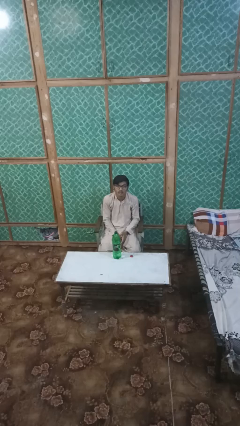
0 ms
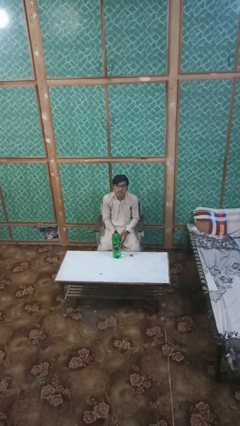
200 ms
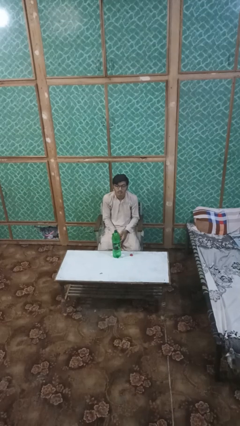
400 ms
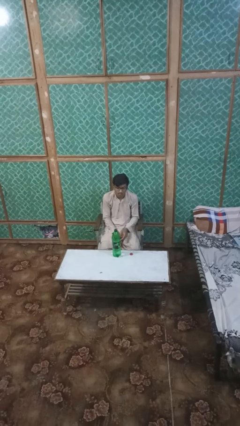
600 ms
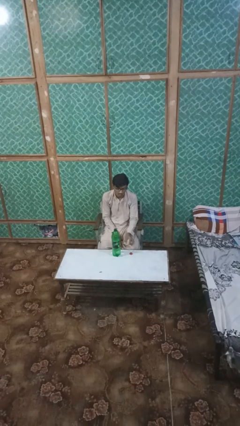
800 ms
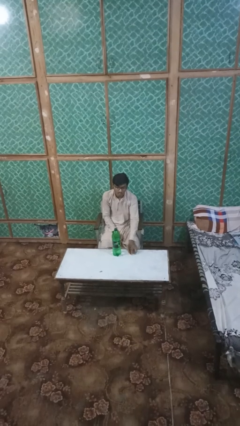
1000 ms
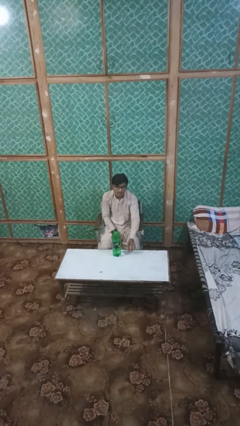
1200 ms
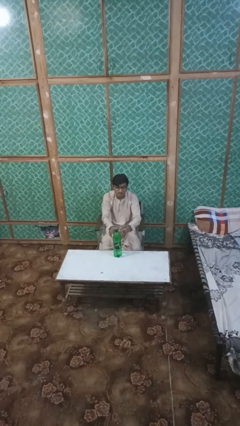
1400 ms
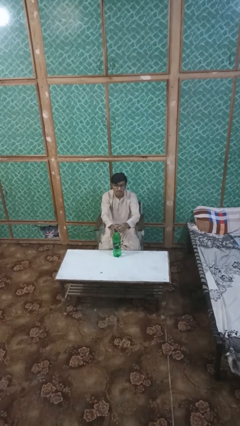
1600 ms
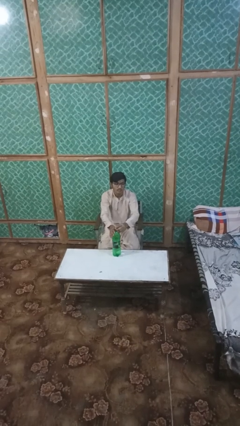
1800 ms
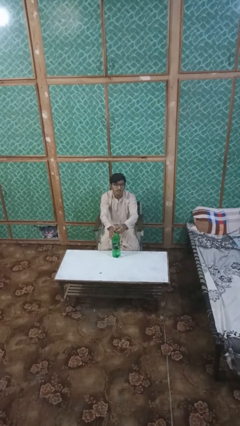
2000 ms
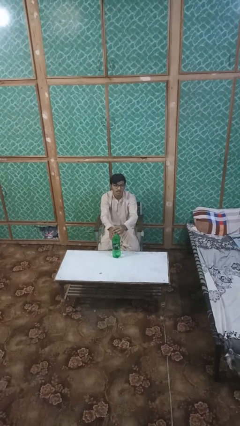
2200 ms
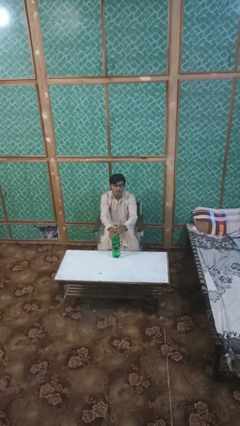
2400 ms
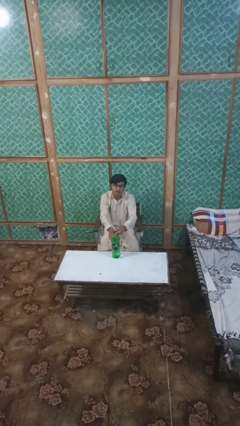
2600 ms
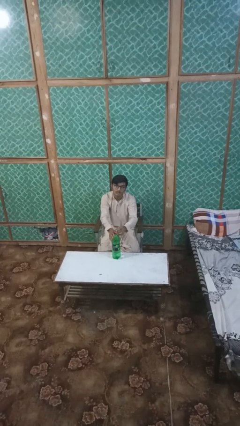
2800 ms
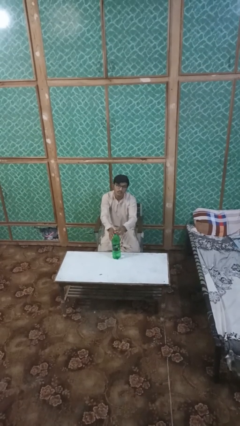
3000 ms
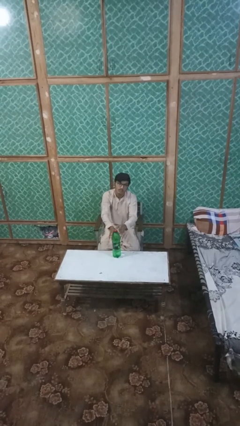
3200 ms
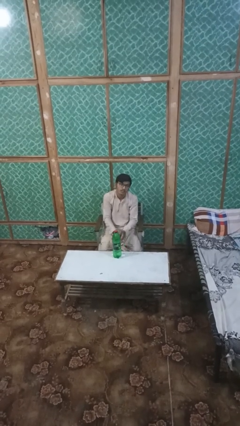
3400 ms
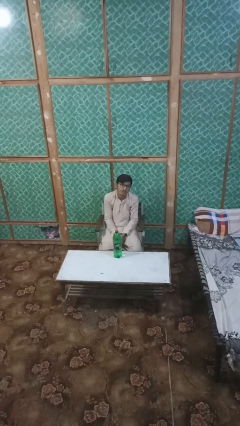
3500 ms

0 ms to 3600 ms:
person screws lid to bottle

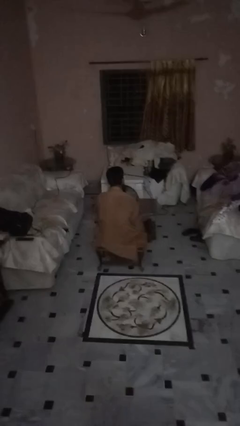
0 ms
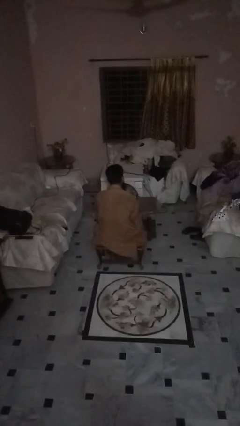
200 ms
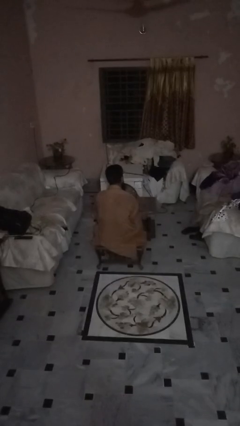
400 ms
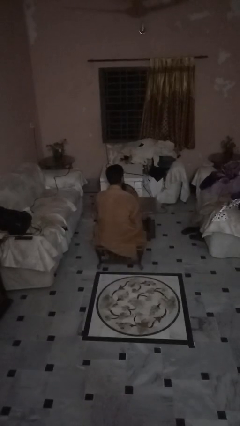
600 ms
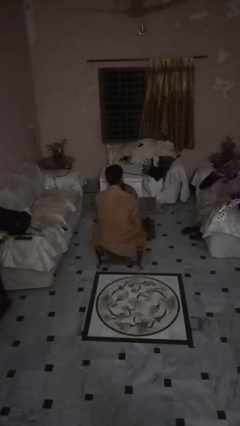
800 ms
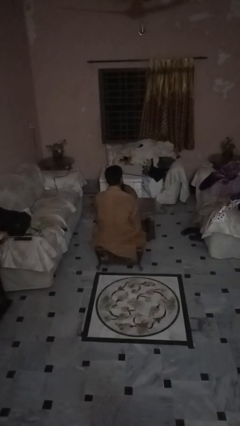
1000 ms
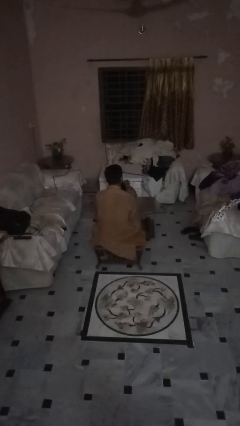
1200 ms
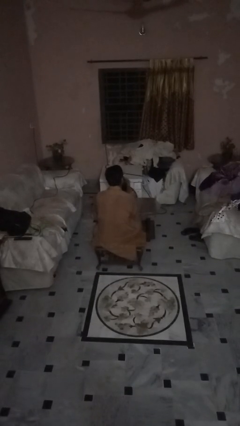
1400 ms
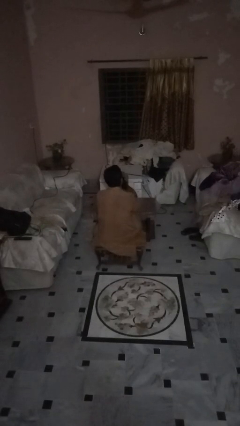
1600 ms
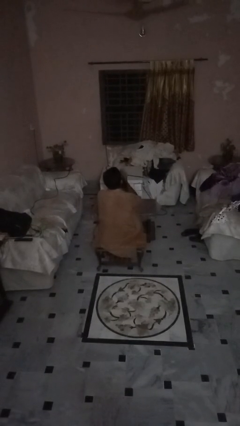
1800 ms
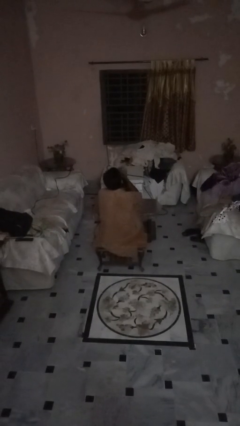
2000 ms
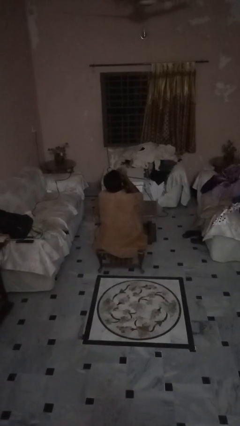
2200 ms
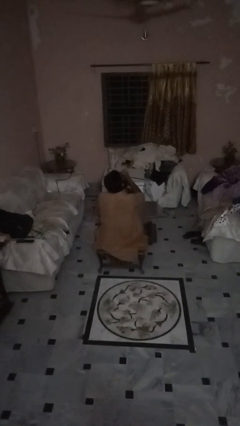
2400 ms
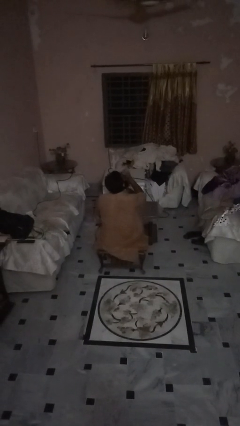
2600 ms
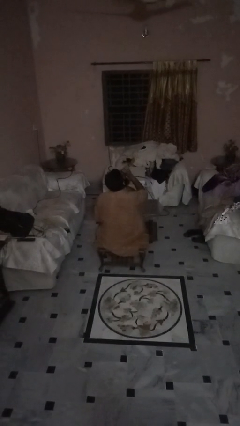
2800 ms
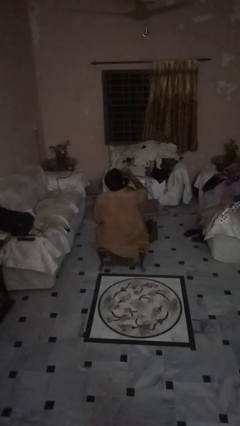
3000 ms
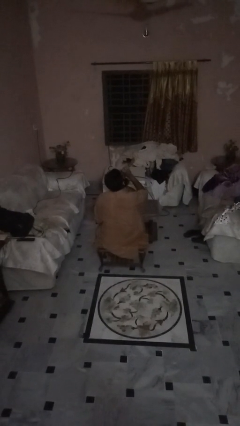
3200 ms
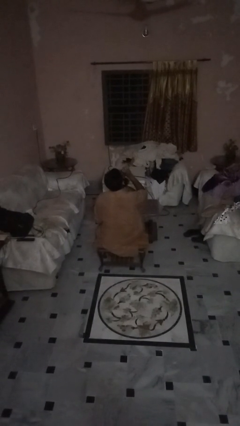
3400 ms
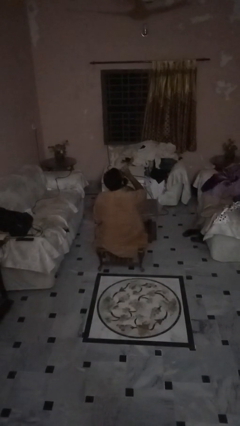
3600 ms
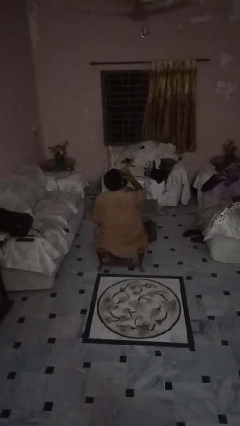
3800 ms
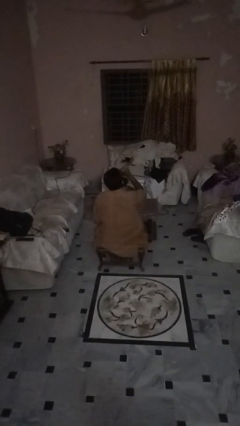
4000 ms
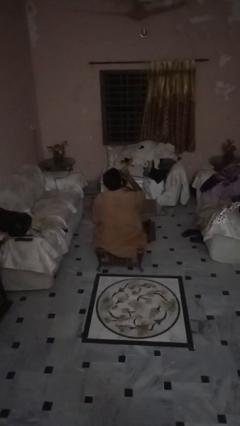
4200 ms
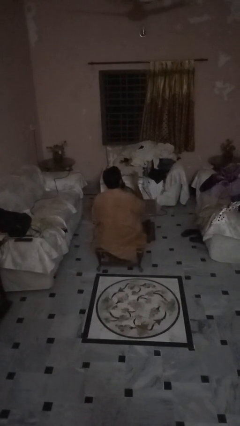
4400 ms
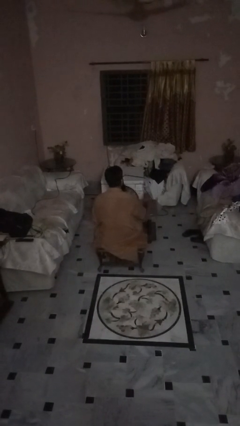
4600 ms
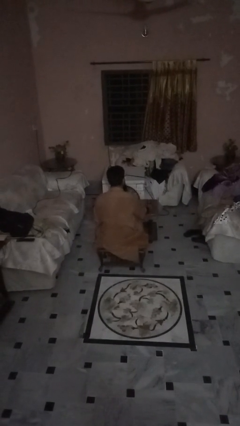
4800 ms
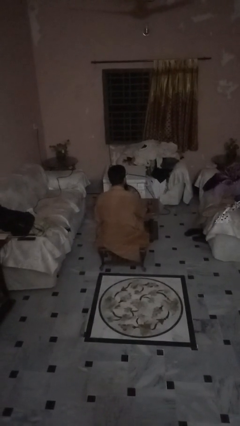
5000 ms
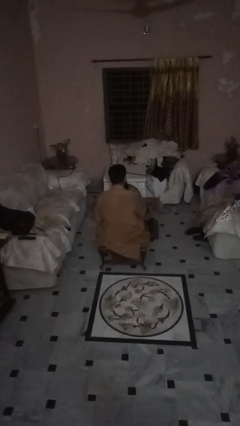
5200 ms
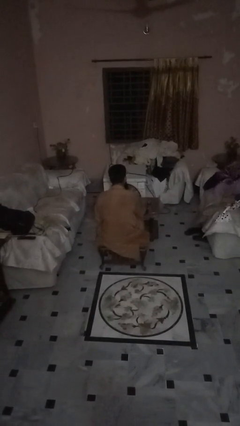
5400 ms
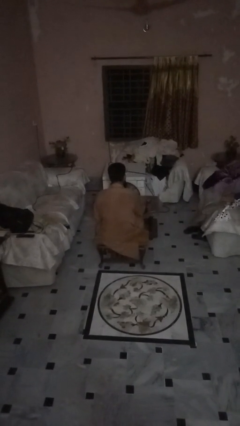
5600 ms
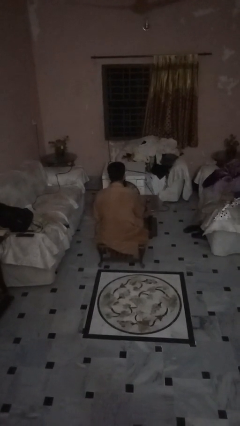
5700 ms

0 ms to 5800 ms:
person drinks from beverage can

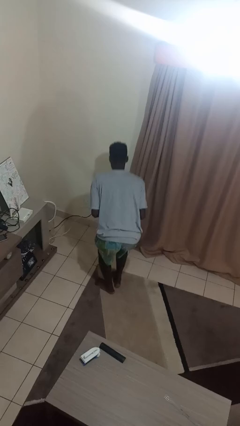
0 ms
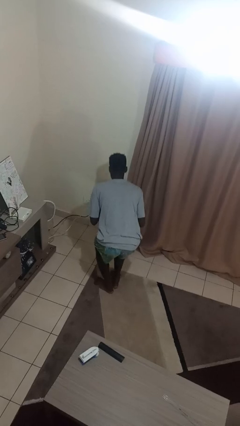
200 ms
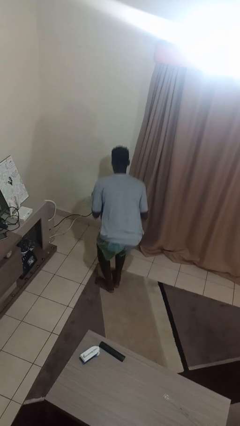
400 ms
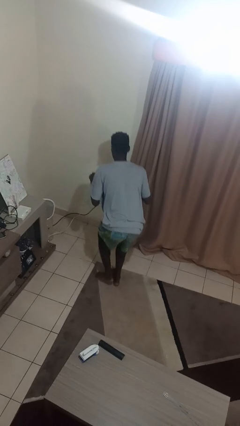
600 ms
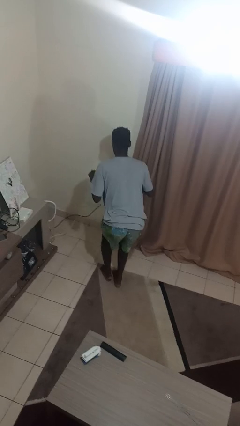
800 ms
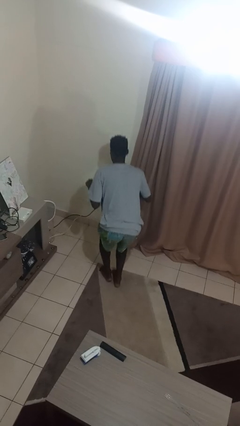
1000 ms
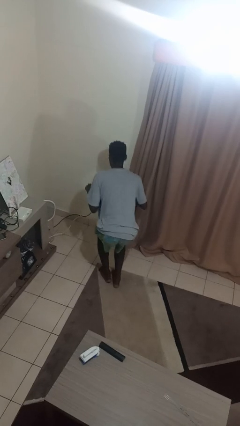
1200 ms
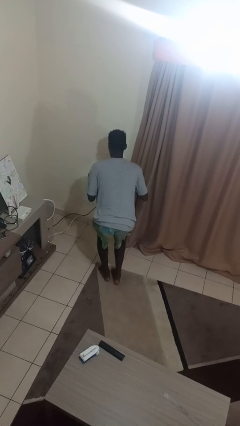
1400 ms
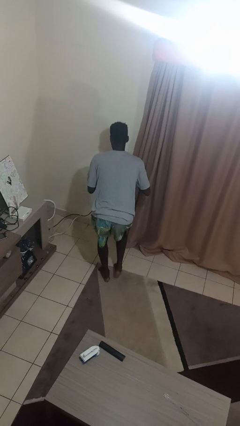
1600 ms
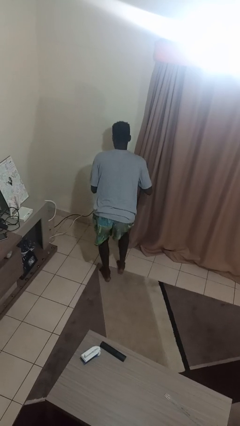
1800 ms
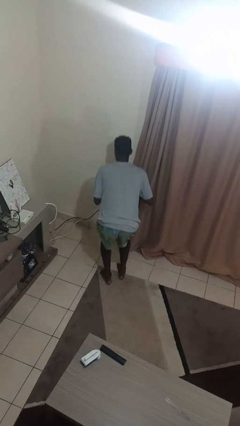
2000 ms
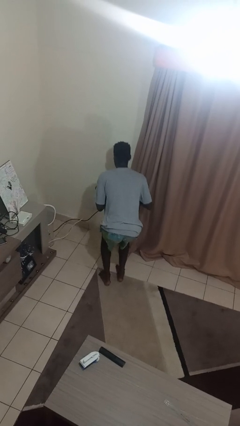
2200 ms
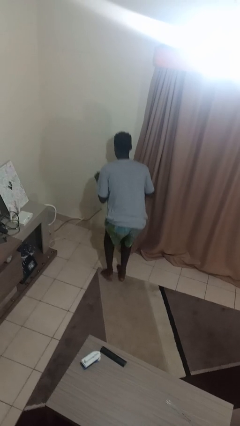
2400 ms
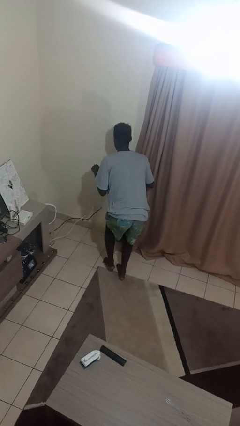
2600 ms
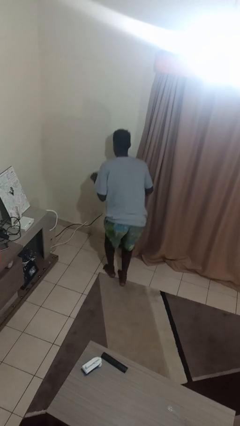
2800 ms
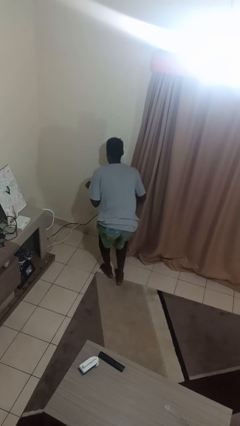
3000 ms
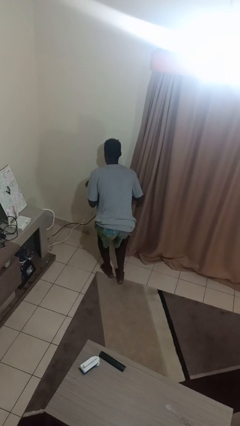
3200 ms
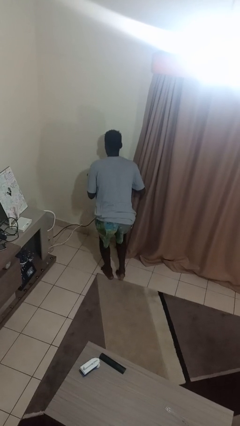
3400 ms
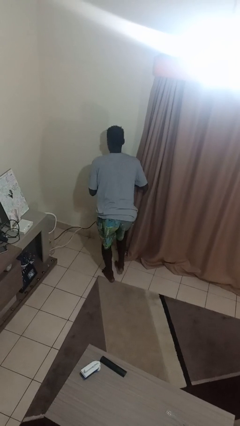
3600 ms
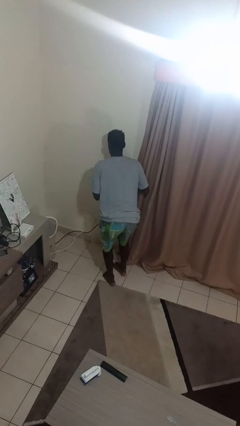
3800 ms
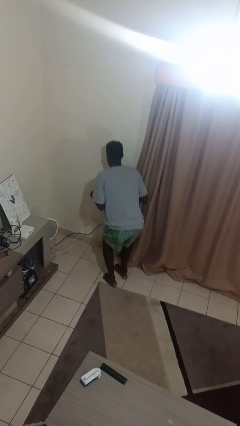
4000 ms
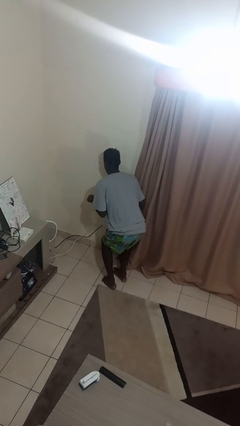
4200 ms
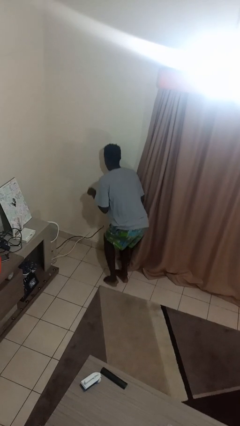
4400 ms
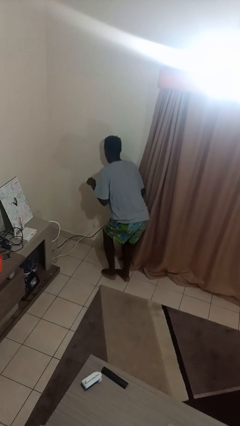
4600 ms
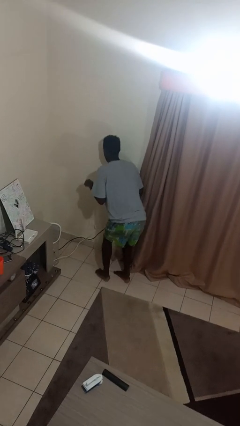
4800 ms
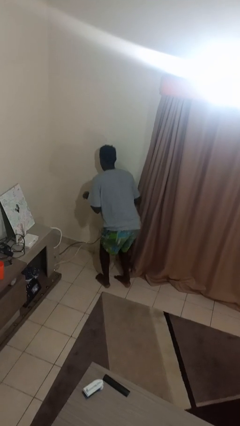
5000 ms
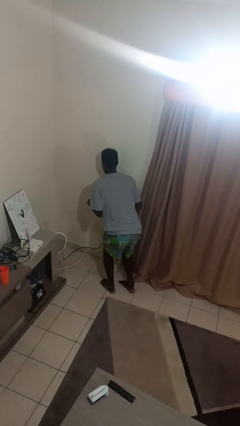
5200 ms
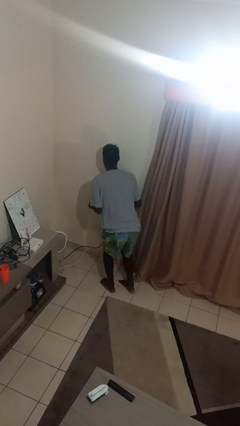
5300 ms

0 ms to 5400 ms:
person walks tiptoe

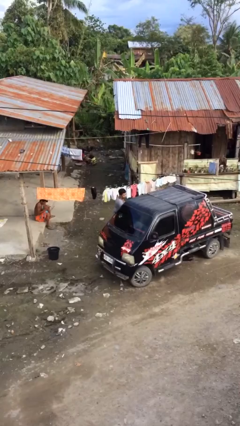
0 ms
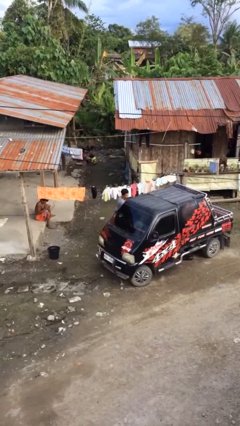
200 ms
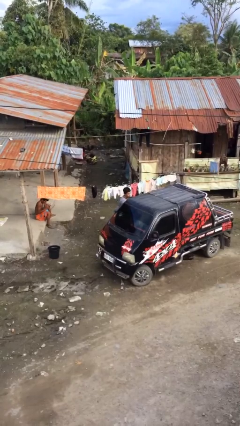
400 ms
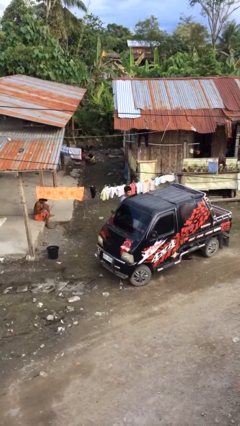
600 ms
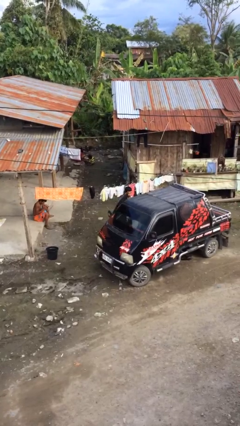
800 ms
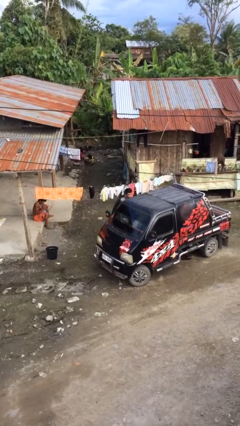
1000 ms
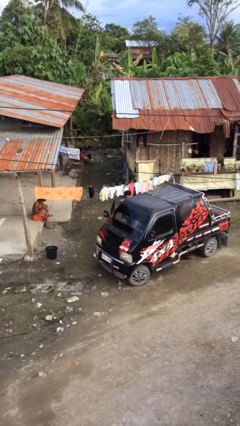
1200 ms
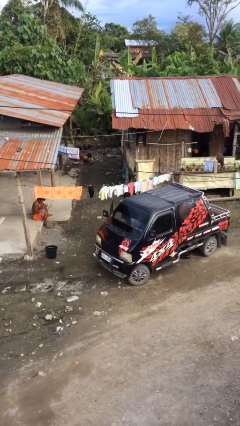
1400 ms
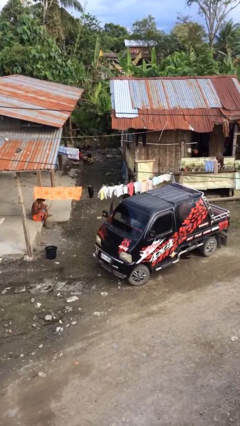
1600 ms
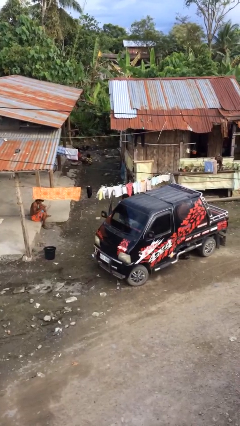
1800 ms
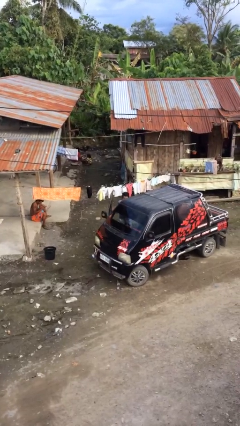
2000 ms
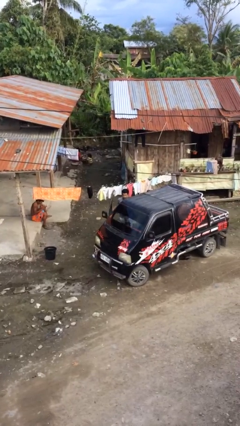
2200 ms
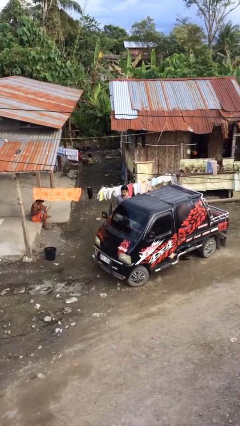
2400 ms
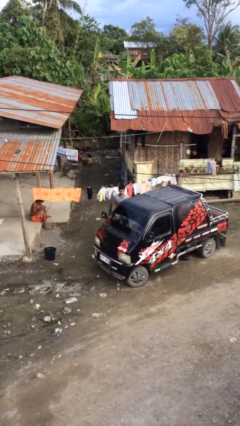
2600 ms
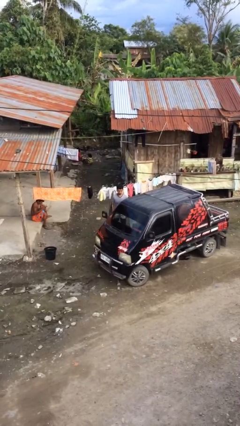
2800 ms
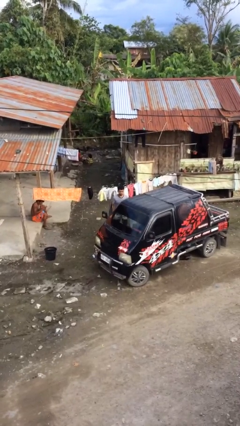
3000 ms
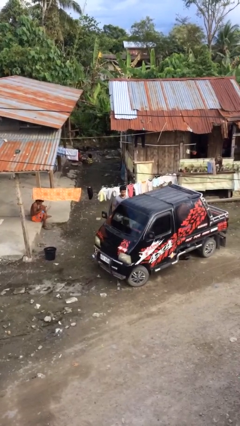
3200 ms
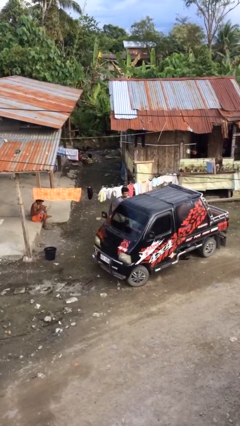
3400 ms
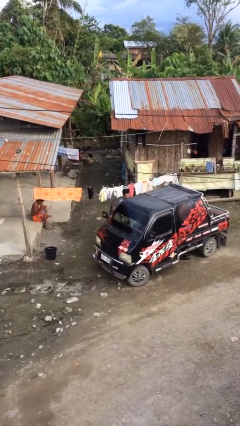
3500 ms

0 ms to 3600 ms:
person loads car
